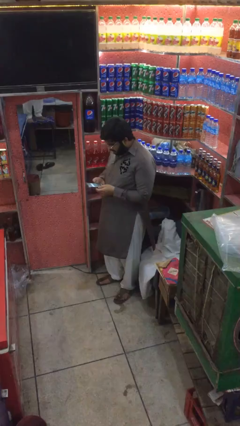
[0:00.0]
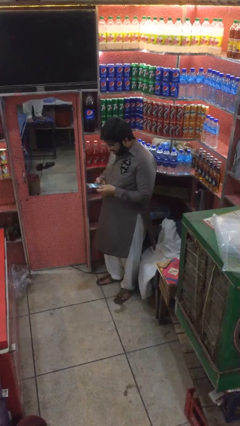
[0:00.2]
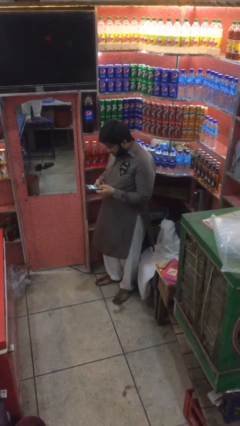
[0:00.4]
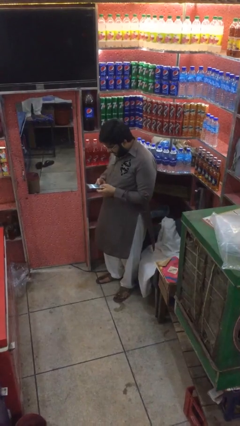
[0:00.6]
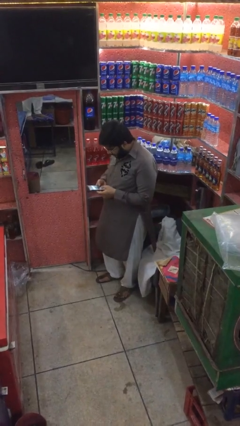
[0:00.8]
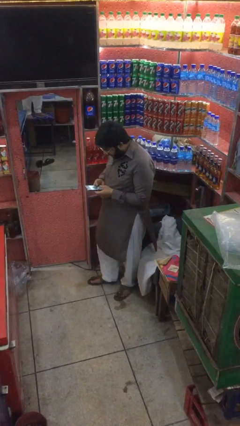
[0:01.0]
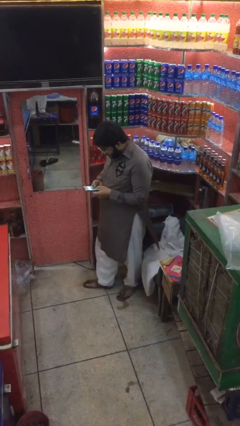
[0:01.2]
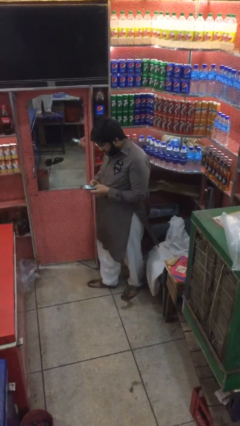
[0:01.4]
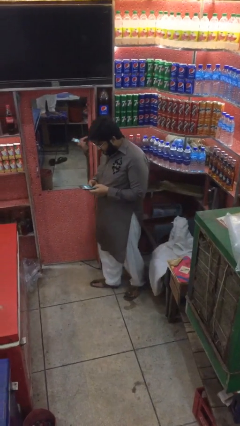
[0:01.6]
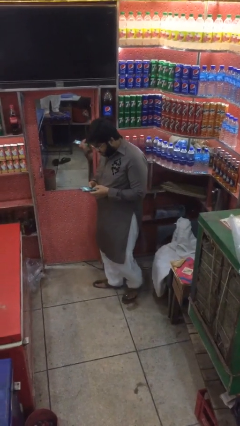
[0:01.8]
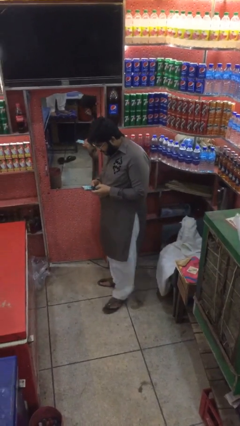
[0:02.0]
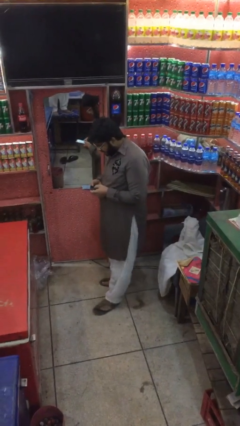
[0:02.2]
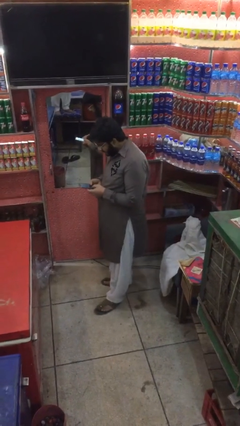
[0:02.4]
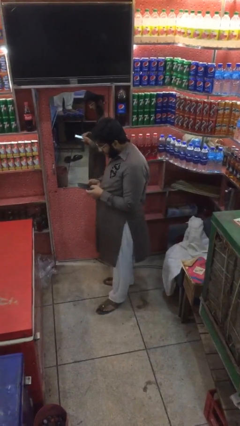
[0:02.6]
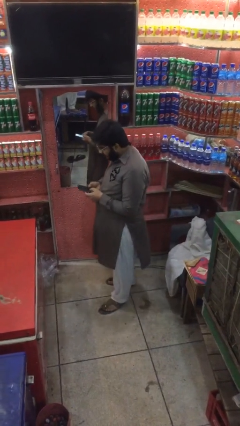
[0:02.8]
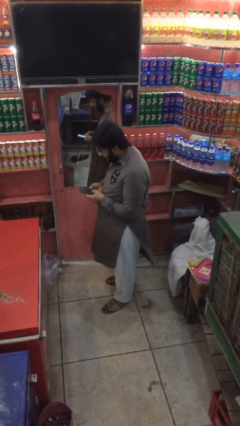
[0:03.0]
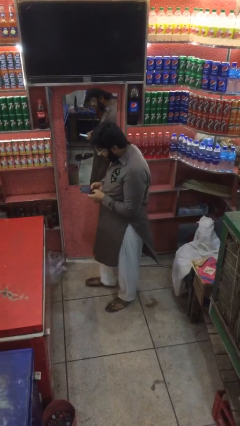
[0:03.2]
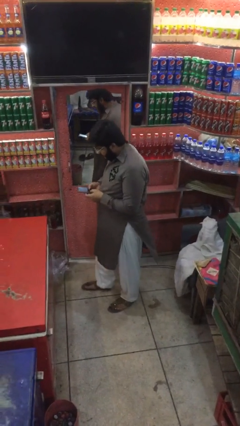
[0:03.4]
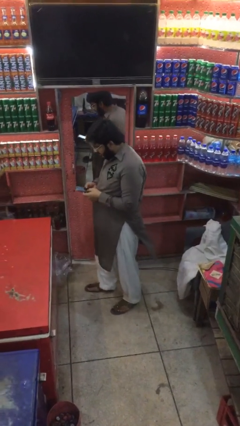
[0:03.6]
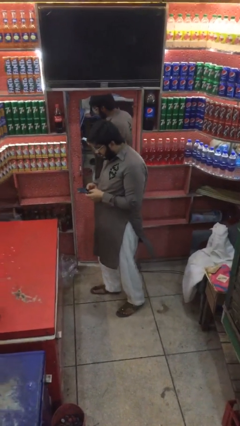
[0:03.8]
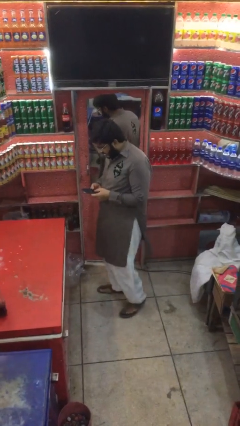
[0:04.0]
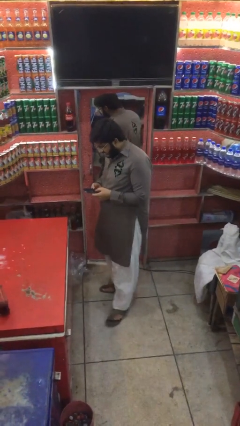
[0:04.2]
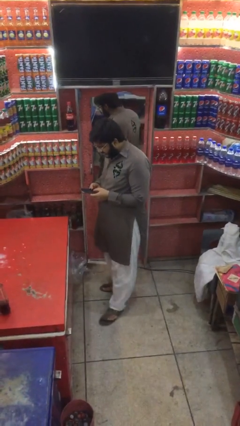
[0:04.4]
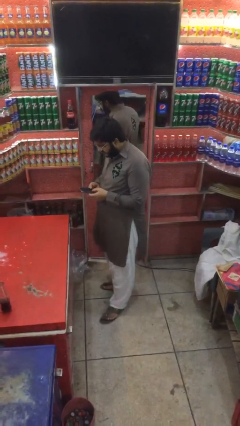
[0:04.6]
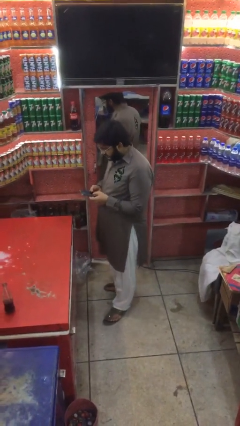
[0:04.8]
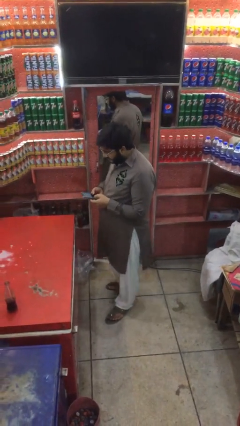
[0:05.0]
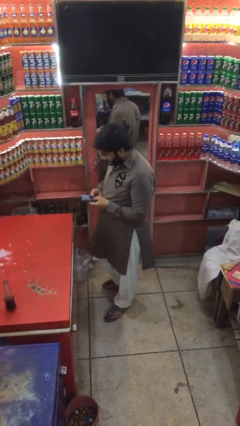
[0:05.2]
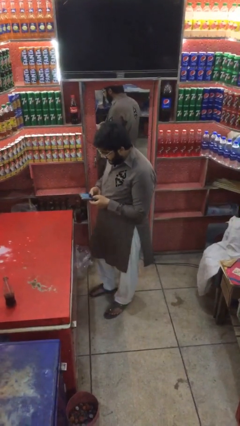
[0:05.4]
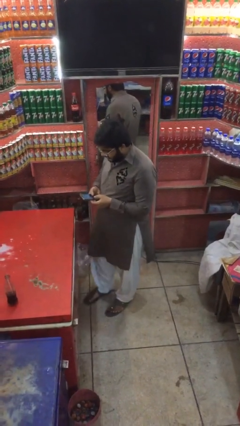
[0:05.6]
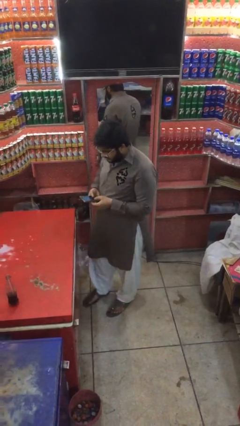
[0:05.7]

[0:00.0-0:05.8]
person texts on phone

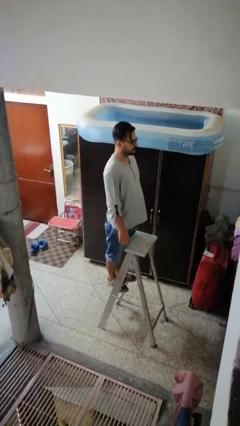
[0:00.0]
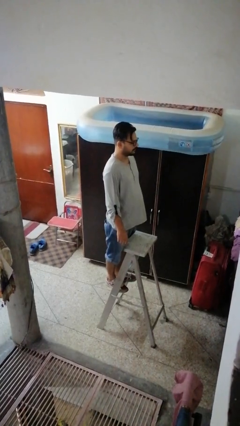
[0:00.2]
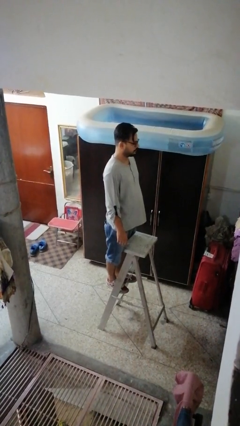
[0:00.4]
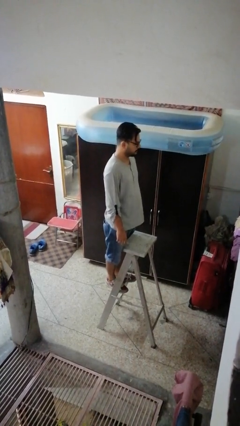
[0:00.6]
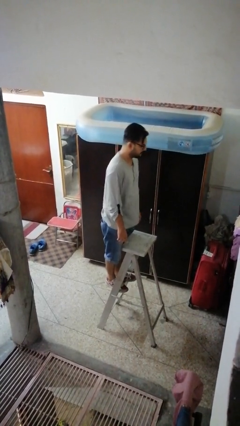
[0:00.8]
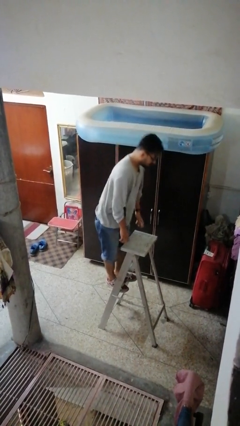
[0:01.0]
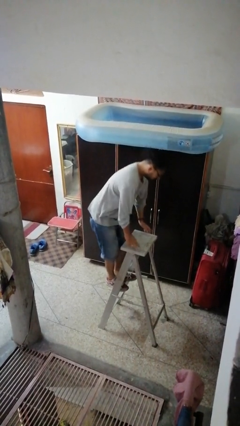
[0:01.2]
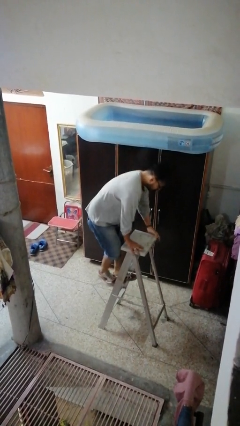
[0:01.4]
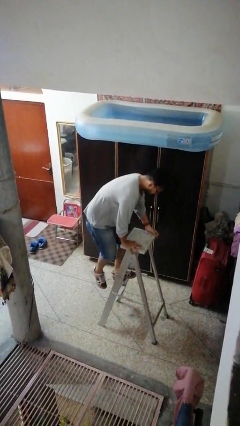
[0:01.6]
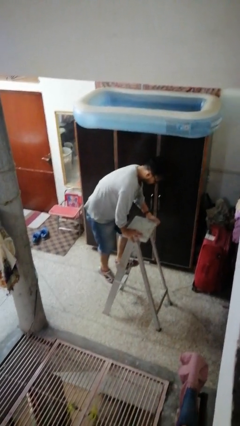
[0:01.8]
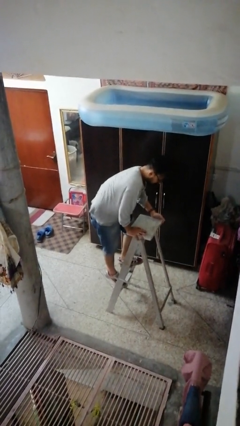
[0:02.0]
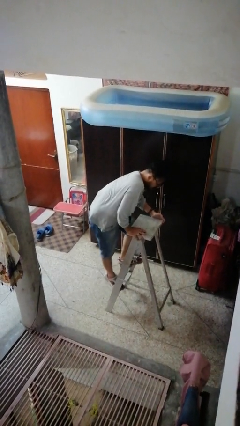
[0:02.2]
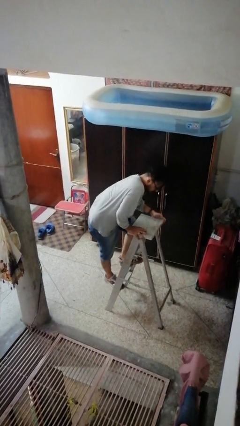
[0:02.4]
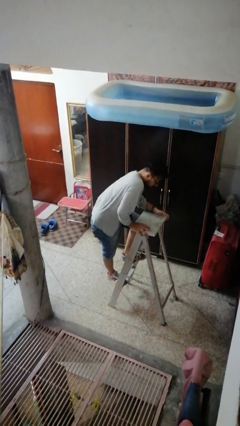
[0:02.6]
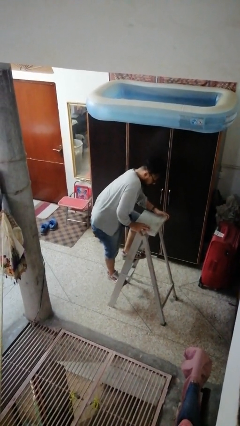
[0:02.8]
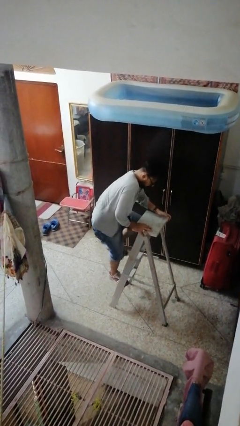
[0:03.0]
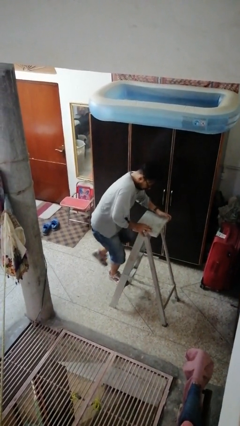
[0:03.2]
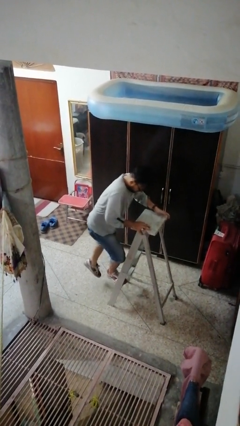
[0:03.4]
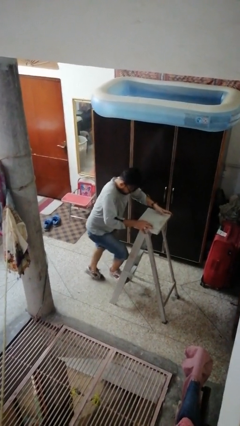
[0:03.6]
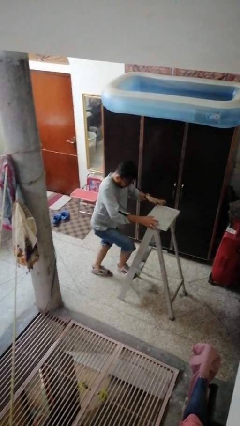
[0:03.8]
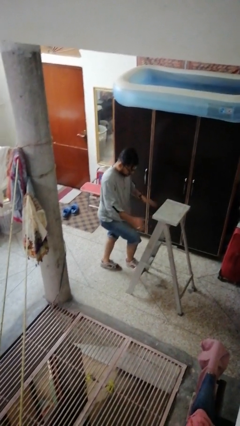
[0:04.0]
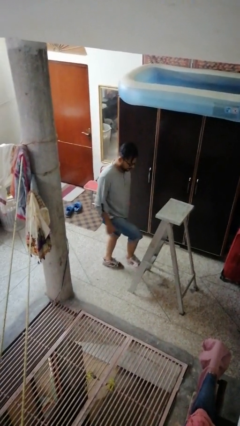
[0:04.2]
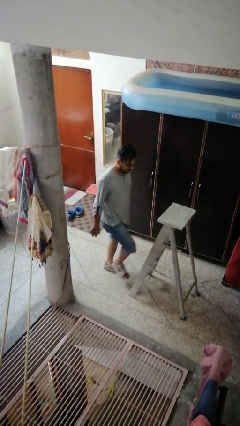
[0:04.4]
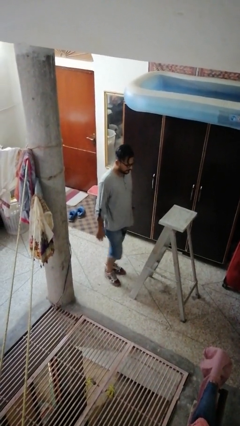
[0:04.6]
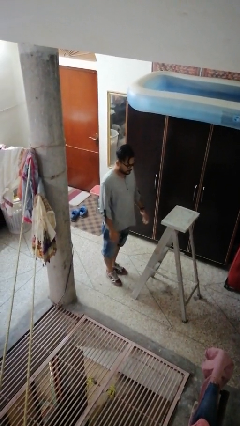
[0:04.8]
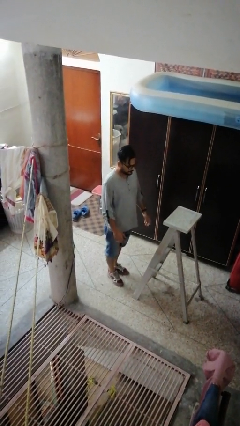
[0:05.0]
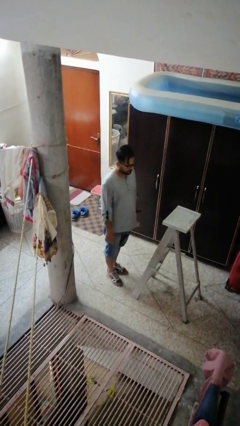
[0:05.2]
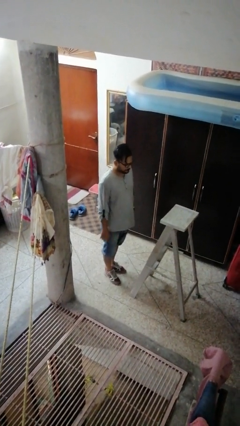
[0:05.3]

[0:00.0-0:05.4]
person climbs down ladder

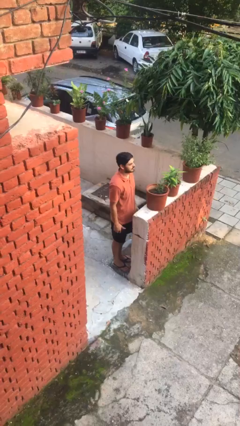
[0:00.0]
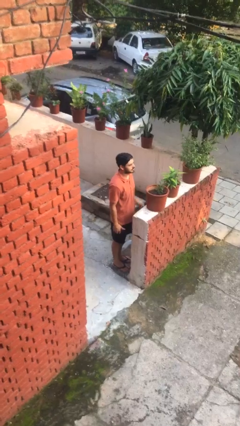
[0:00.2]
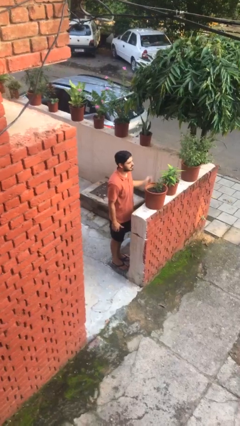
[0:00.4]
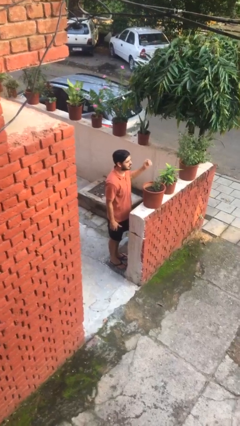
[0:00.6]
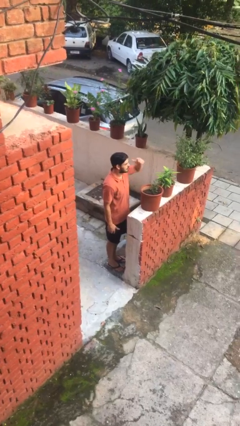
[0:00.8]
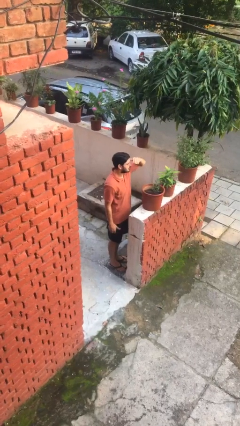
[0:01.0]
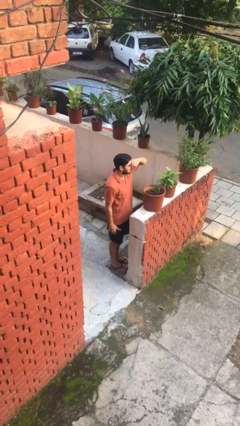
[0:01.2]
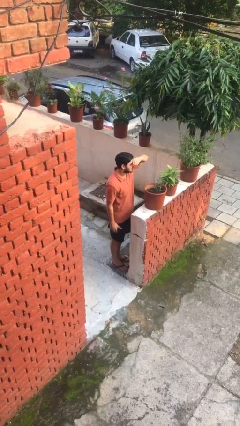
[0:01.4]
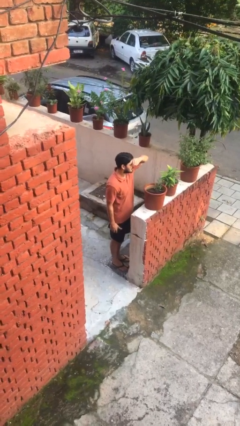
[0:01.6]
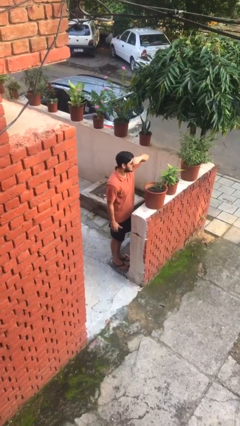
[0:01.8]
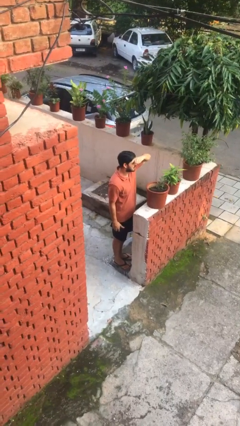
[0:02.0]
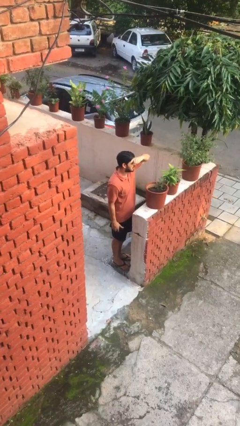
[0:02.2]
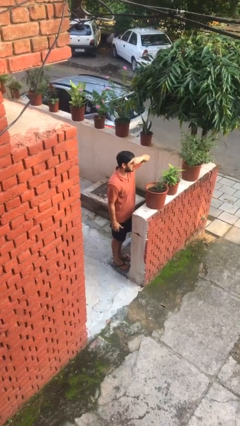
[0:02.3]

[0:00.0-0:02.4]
person shades eyes

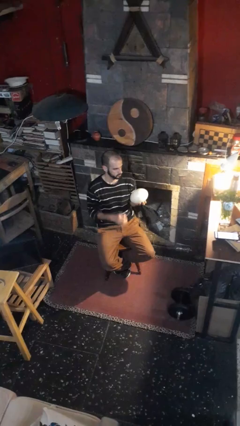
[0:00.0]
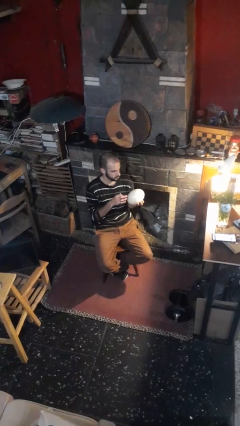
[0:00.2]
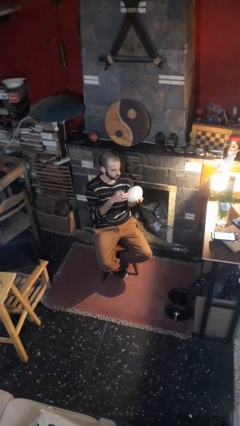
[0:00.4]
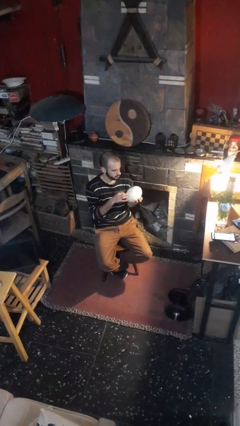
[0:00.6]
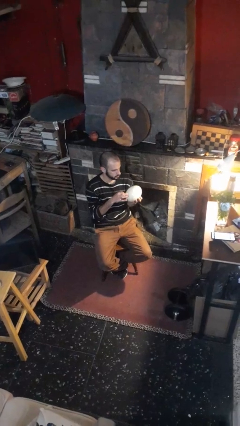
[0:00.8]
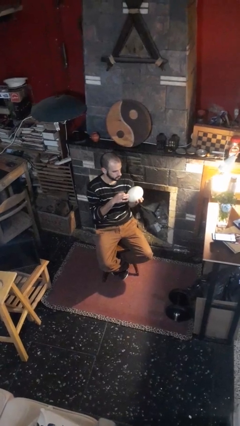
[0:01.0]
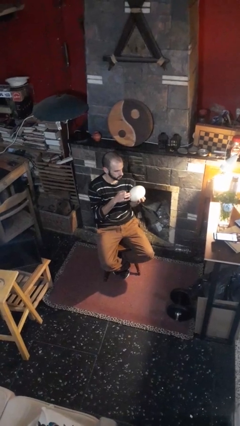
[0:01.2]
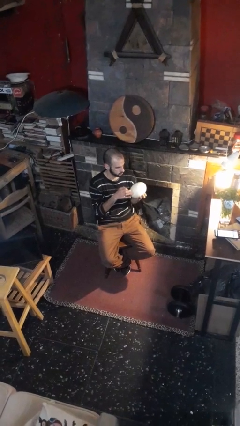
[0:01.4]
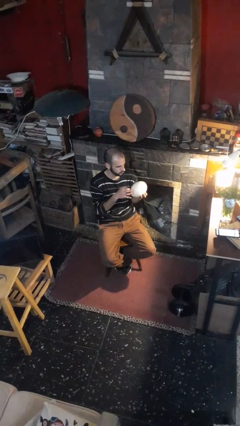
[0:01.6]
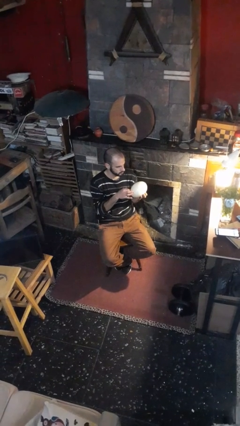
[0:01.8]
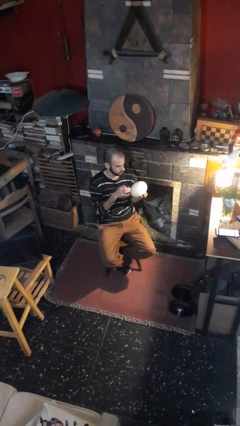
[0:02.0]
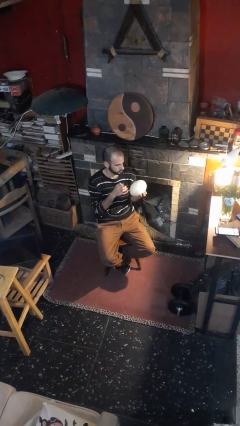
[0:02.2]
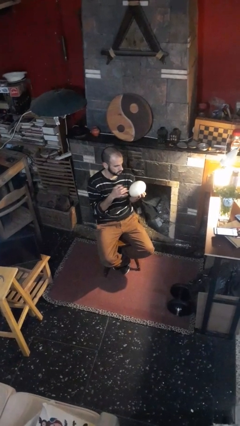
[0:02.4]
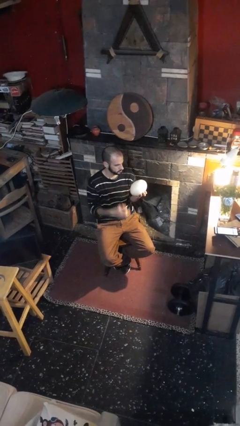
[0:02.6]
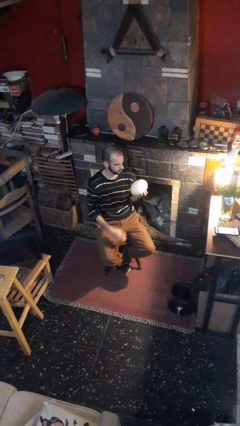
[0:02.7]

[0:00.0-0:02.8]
person taps object with finger

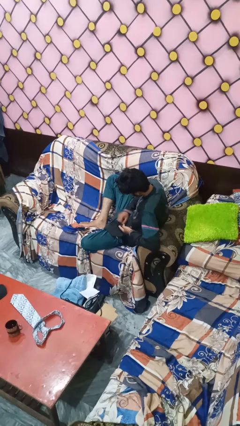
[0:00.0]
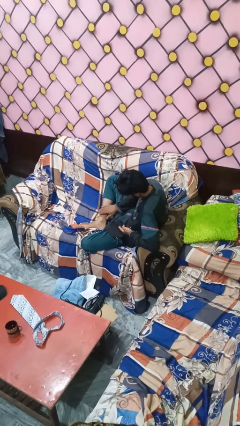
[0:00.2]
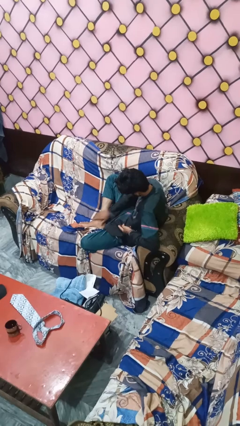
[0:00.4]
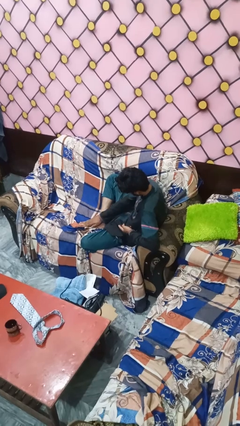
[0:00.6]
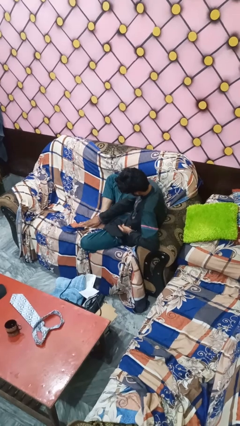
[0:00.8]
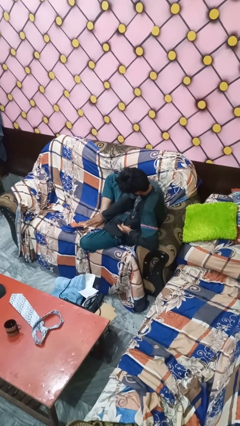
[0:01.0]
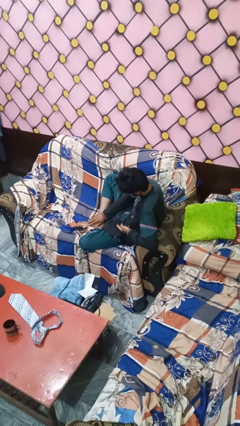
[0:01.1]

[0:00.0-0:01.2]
person rubs foot
